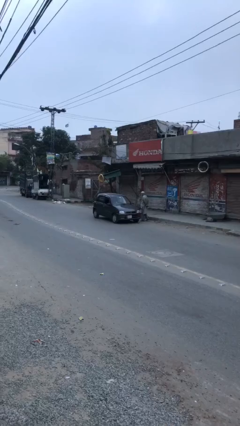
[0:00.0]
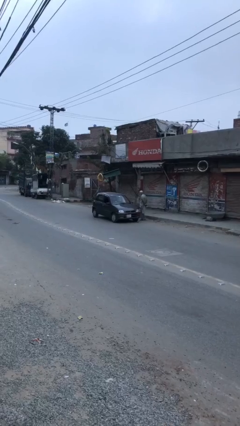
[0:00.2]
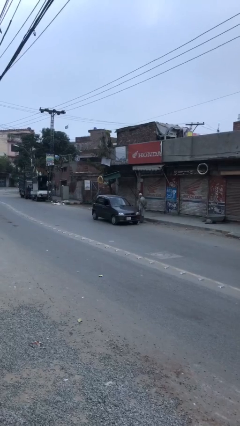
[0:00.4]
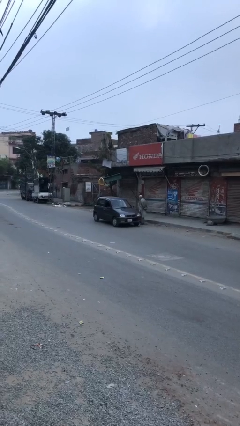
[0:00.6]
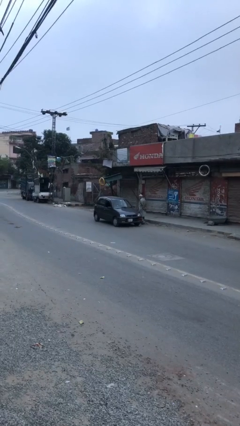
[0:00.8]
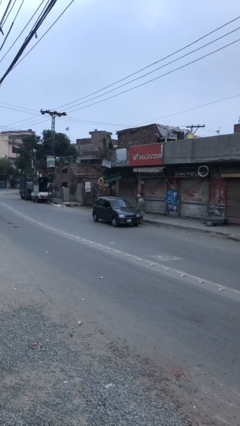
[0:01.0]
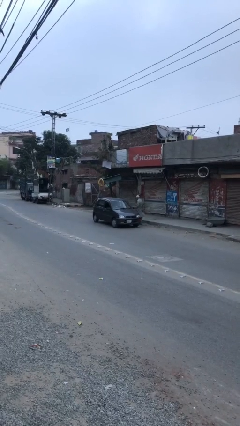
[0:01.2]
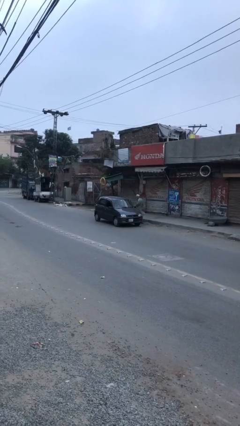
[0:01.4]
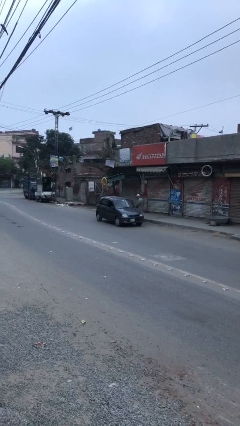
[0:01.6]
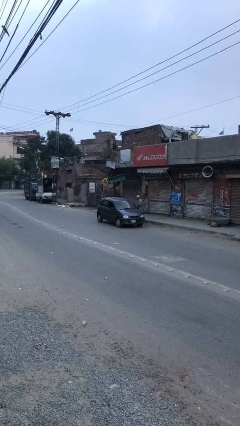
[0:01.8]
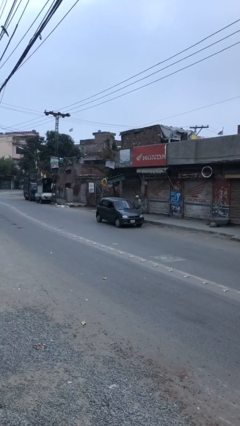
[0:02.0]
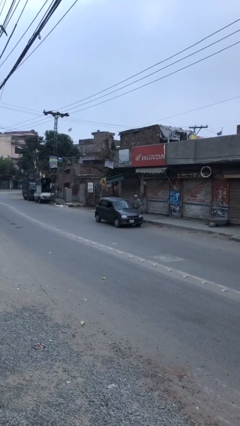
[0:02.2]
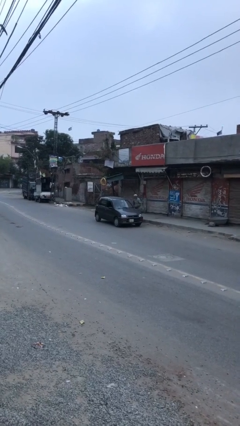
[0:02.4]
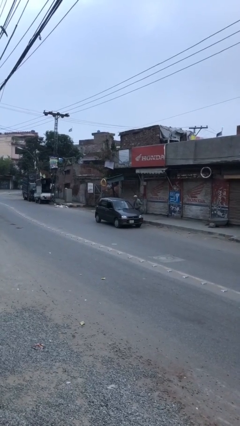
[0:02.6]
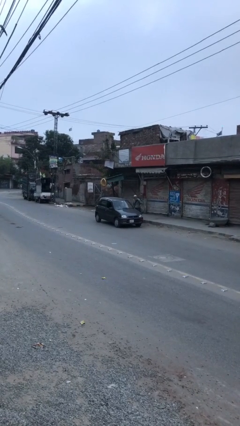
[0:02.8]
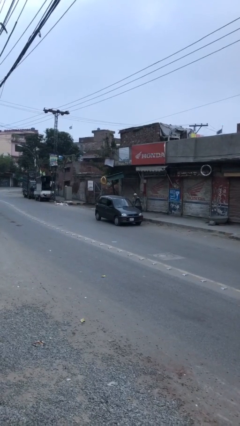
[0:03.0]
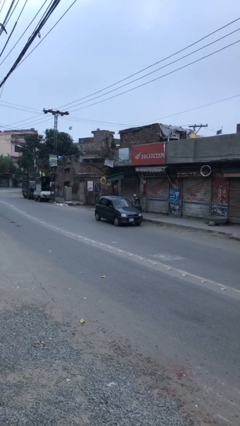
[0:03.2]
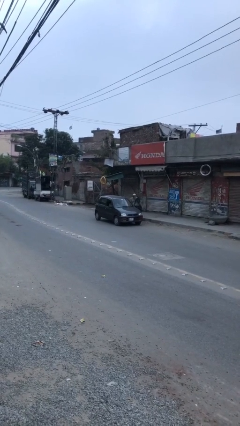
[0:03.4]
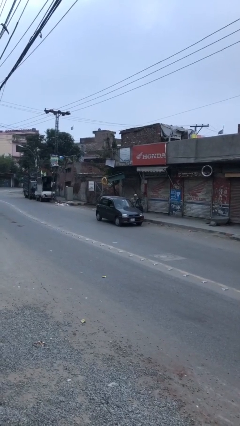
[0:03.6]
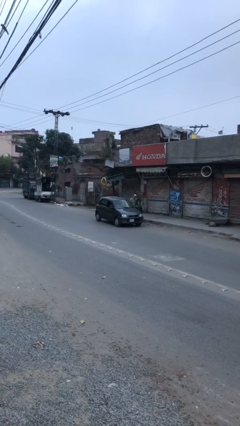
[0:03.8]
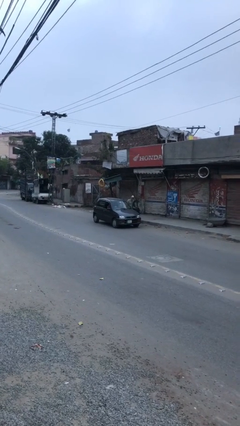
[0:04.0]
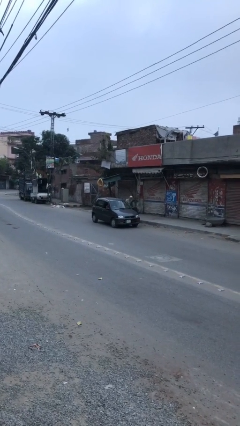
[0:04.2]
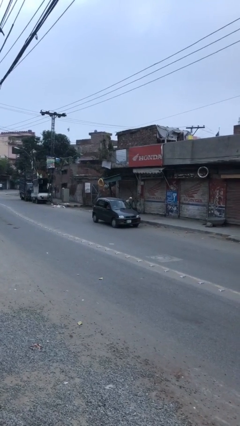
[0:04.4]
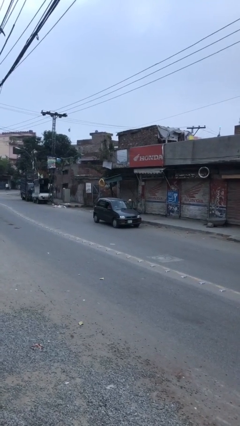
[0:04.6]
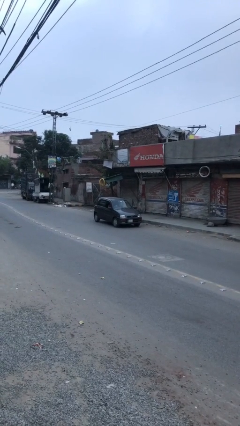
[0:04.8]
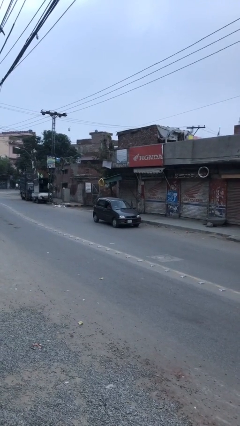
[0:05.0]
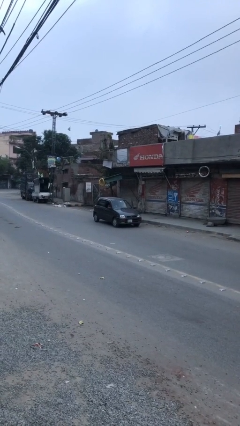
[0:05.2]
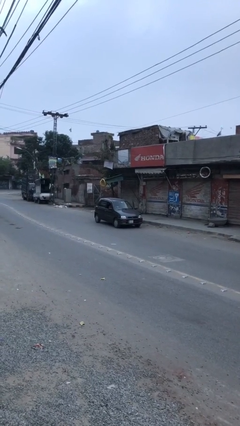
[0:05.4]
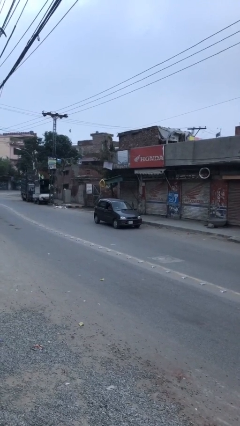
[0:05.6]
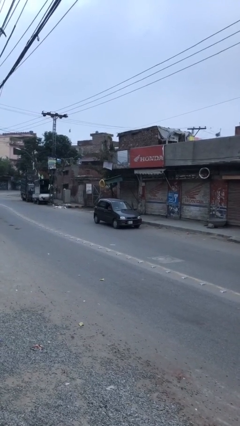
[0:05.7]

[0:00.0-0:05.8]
car picks up person

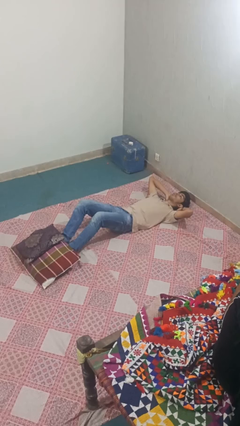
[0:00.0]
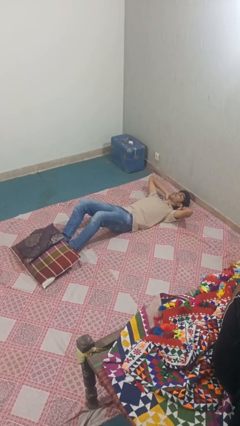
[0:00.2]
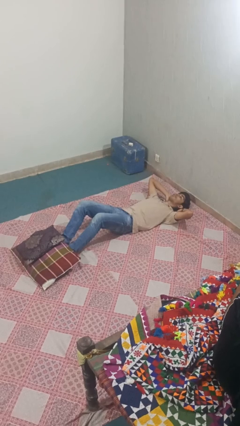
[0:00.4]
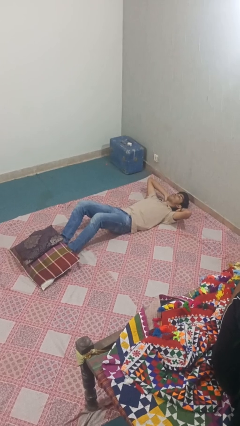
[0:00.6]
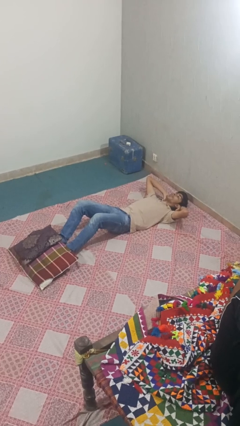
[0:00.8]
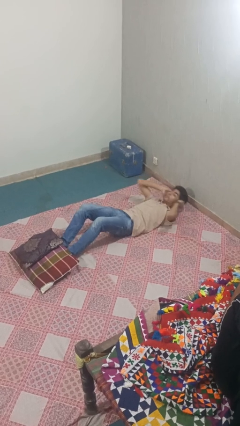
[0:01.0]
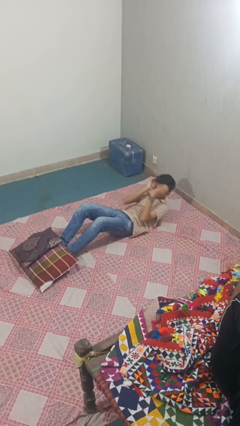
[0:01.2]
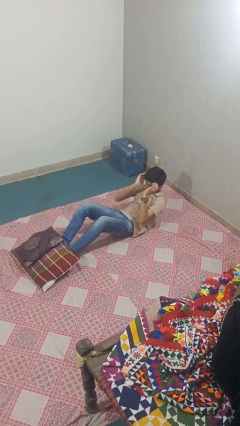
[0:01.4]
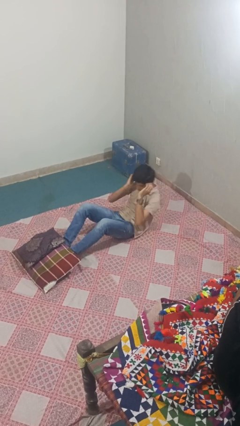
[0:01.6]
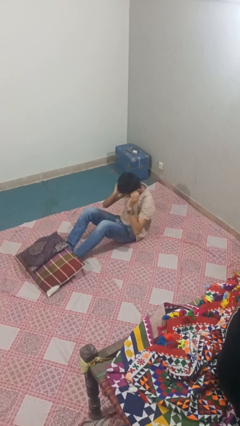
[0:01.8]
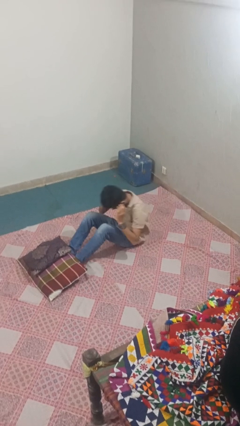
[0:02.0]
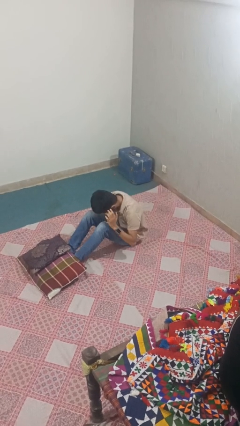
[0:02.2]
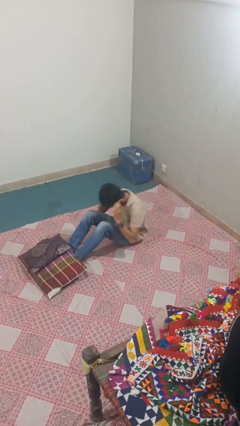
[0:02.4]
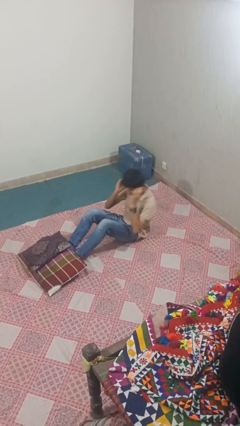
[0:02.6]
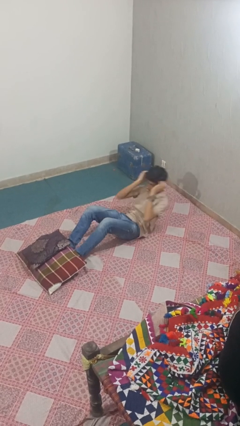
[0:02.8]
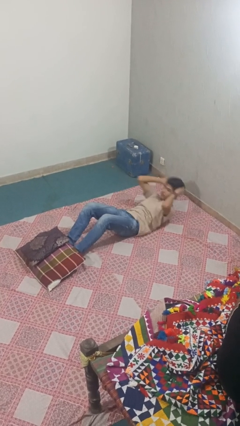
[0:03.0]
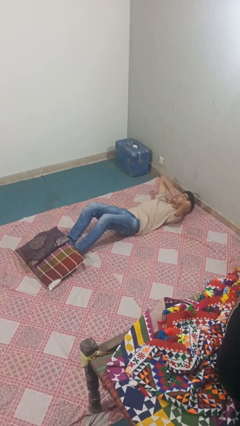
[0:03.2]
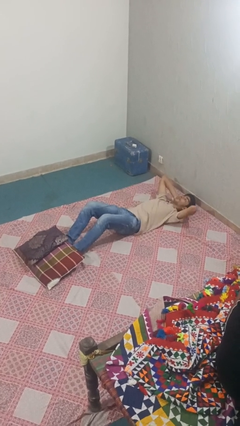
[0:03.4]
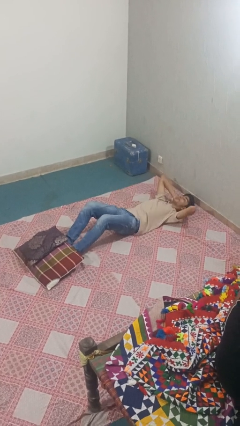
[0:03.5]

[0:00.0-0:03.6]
person exercises with situp

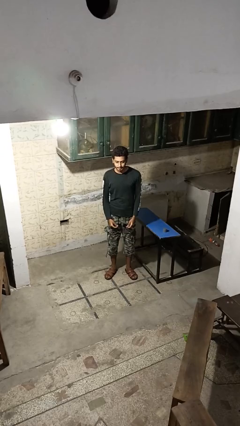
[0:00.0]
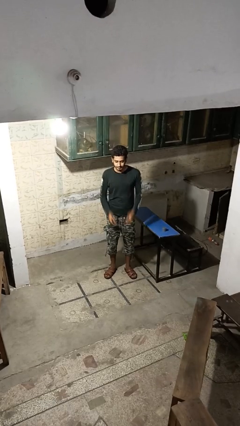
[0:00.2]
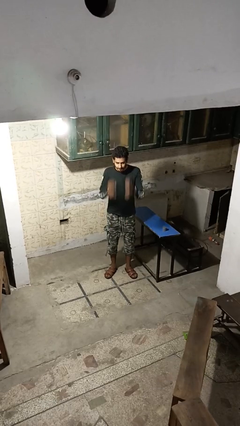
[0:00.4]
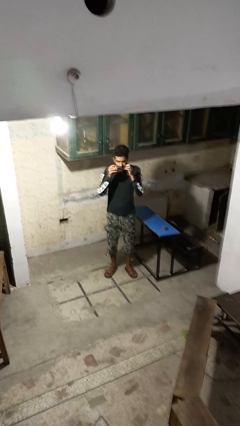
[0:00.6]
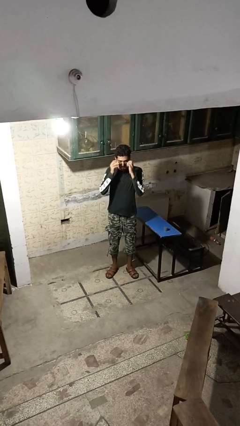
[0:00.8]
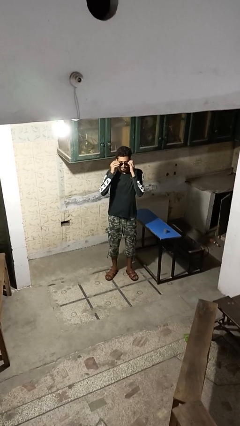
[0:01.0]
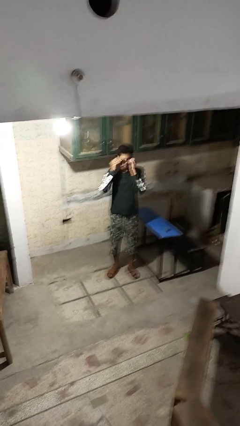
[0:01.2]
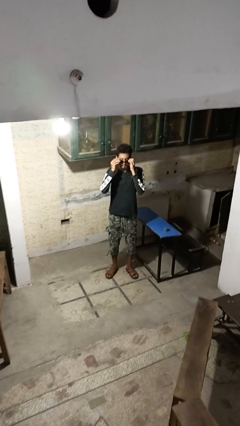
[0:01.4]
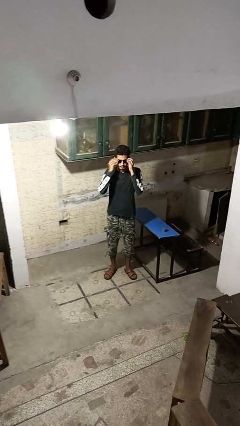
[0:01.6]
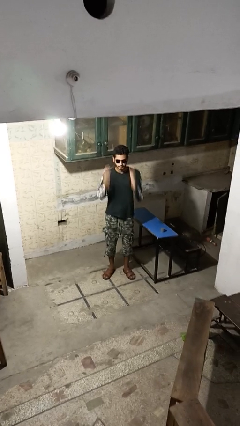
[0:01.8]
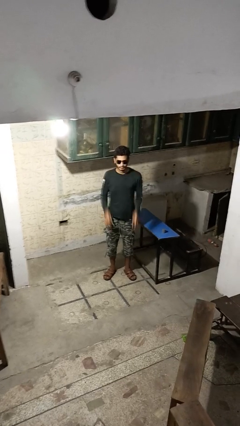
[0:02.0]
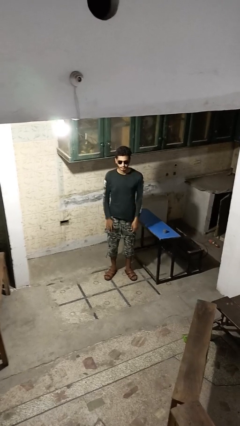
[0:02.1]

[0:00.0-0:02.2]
person puts on sunglasses

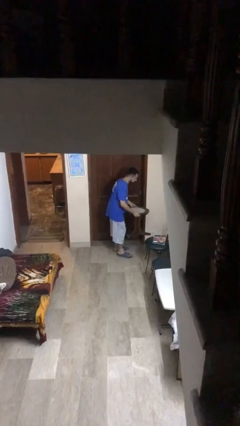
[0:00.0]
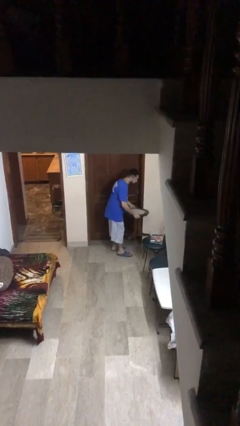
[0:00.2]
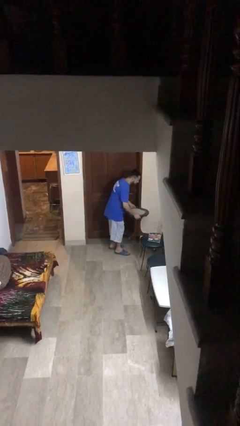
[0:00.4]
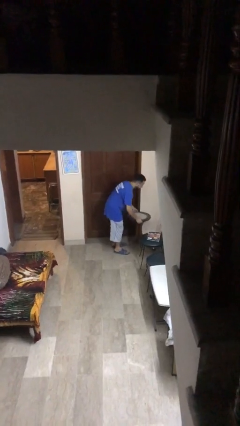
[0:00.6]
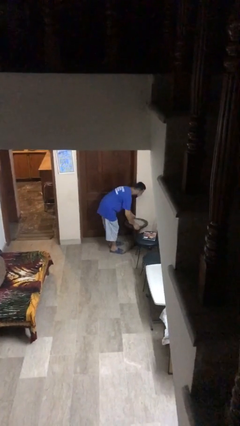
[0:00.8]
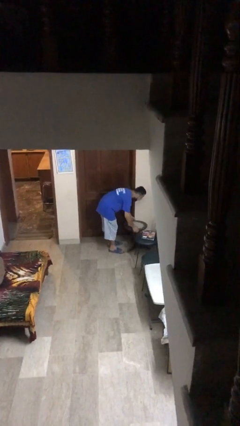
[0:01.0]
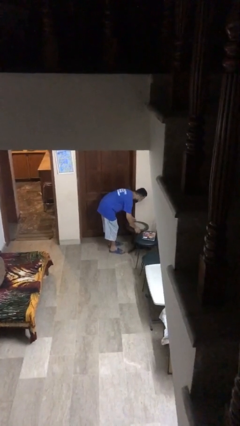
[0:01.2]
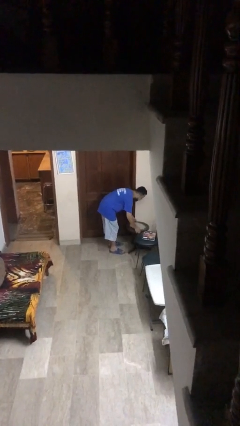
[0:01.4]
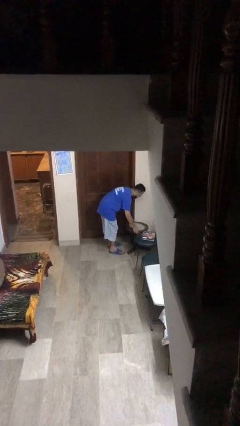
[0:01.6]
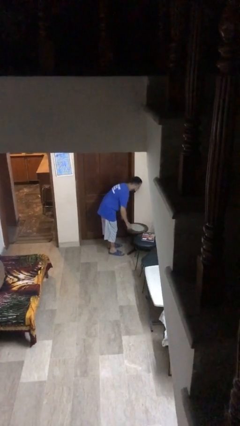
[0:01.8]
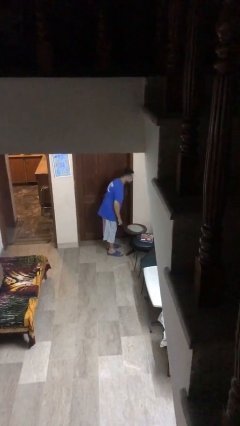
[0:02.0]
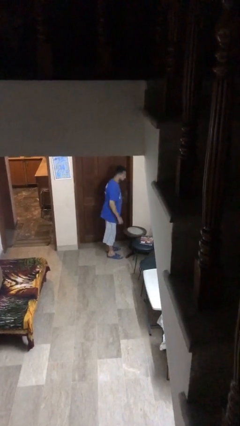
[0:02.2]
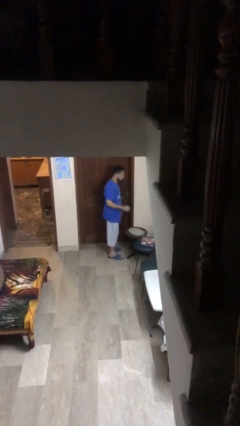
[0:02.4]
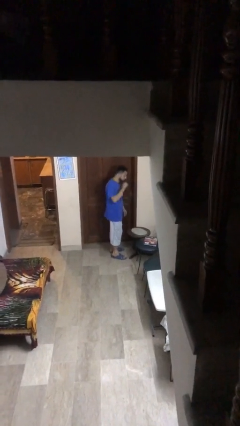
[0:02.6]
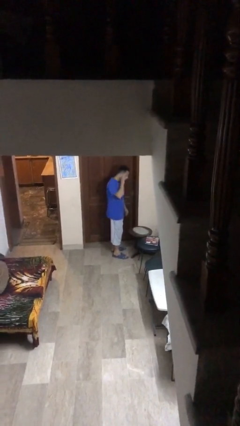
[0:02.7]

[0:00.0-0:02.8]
person puts down object on floor

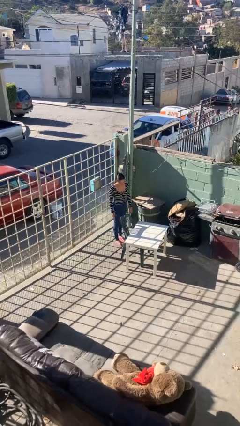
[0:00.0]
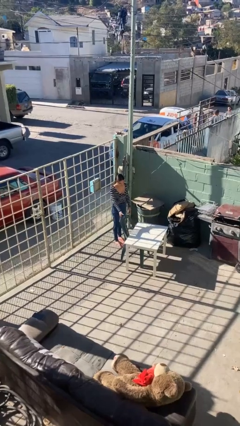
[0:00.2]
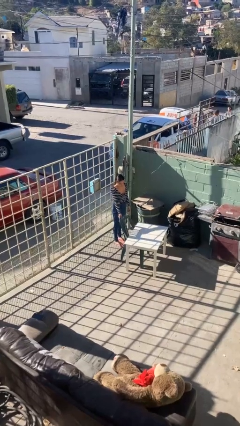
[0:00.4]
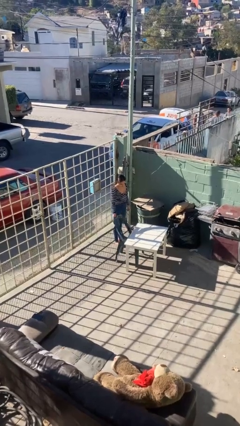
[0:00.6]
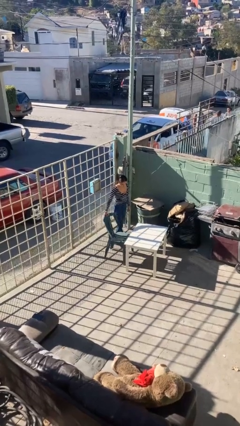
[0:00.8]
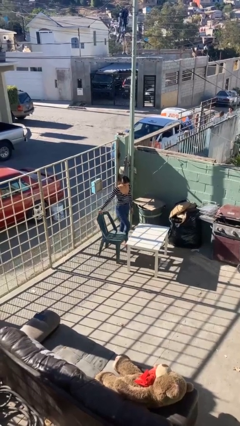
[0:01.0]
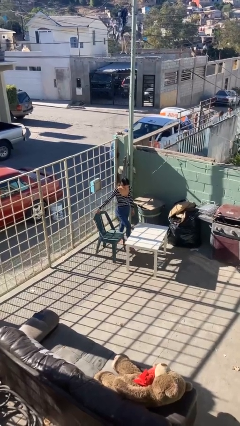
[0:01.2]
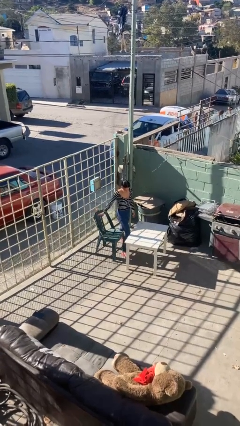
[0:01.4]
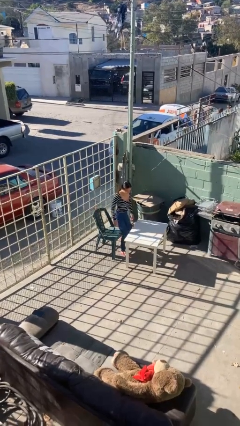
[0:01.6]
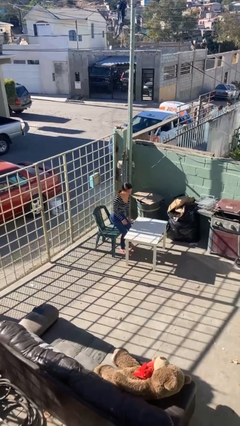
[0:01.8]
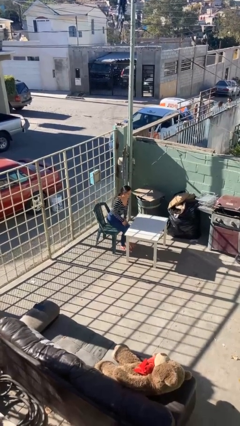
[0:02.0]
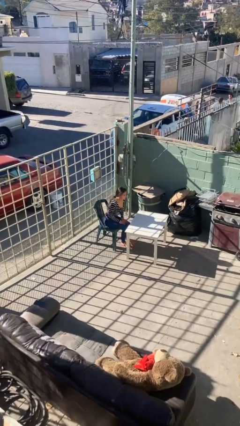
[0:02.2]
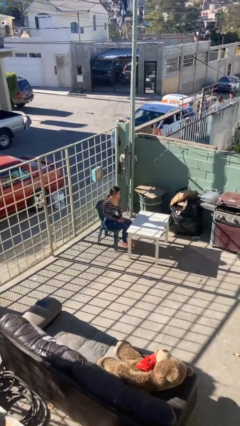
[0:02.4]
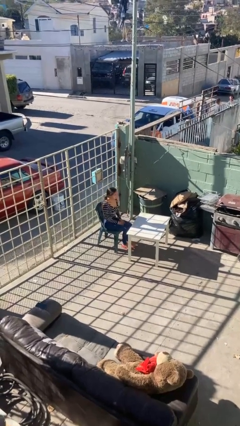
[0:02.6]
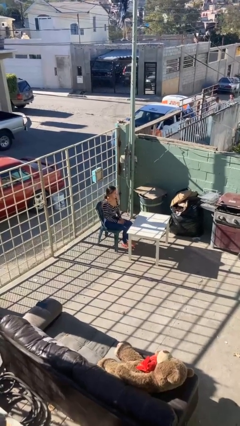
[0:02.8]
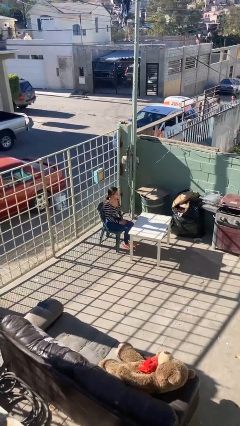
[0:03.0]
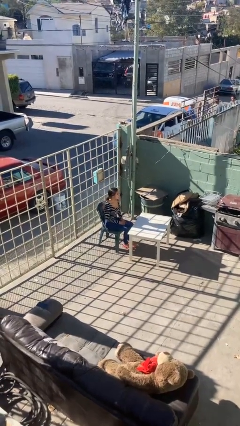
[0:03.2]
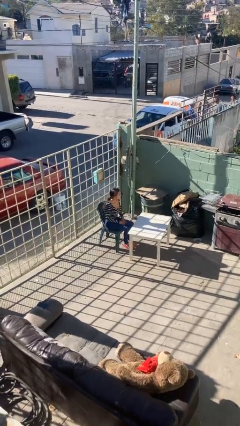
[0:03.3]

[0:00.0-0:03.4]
person sits down
